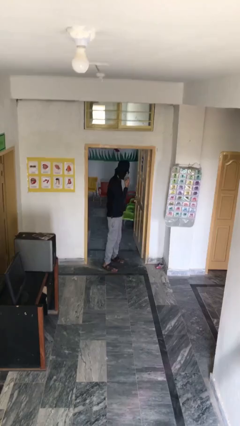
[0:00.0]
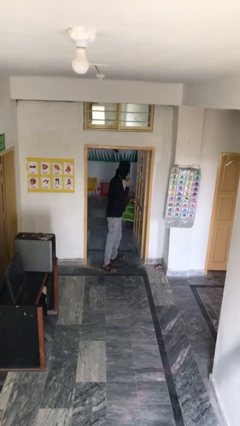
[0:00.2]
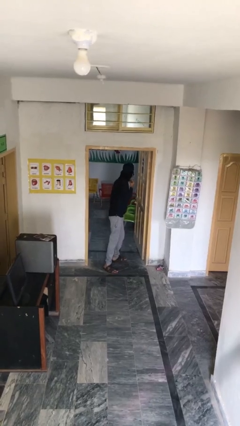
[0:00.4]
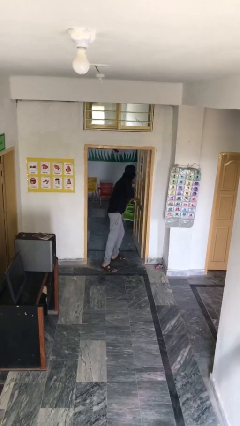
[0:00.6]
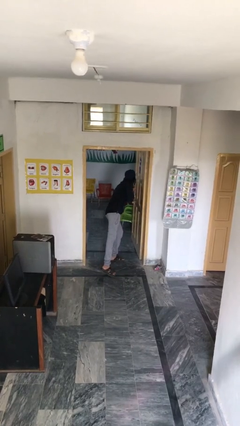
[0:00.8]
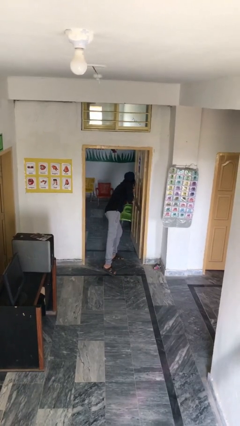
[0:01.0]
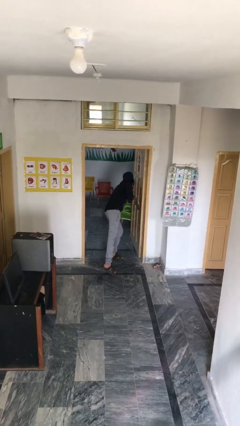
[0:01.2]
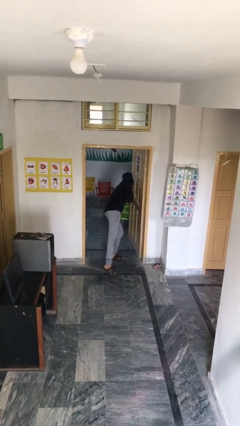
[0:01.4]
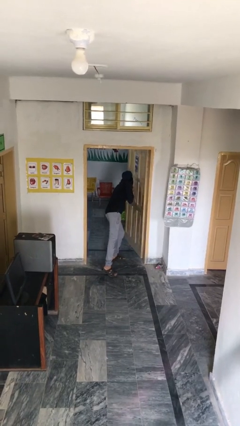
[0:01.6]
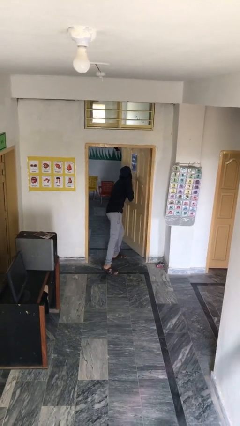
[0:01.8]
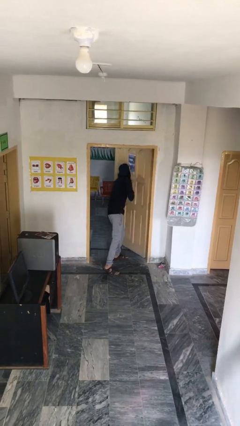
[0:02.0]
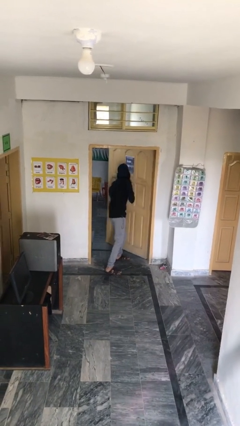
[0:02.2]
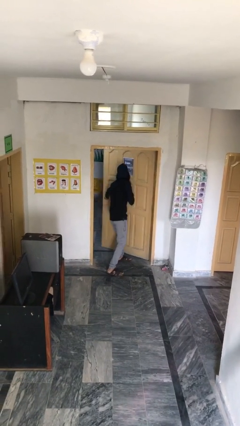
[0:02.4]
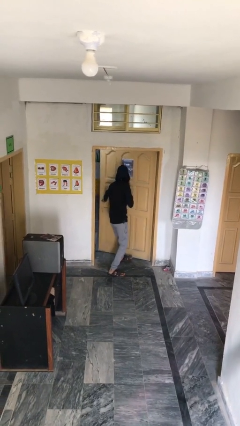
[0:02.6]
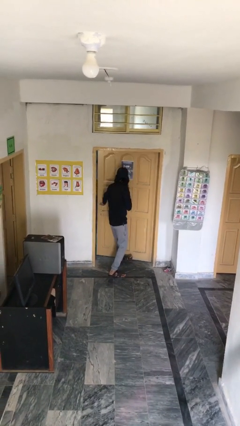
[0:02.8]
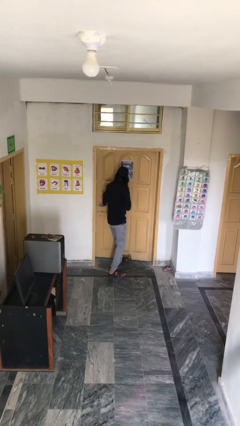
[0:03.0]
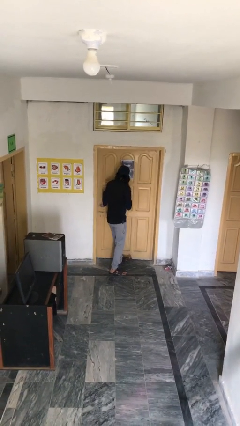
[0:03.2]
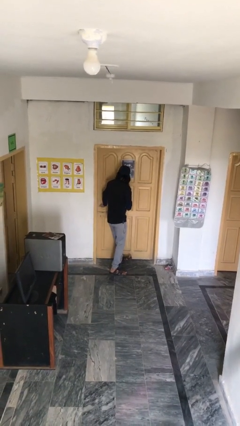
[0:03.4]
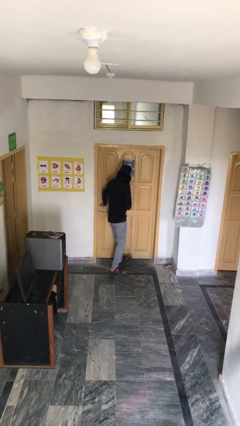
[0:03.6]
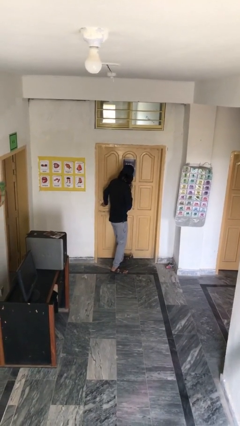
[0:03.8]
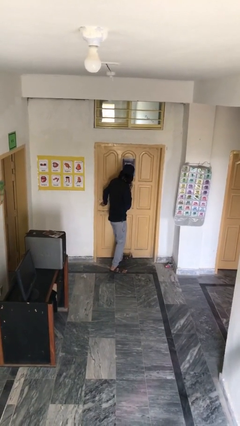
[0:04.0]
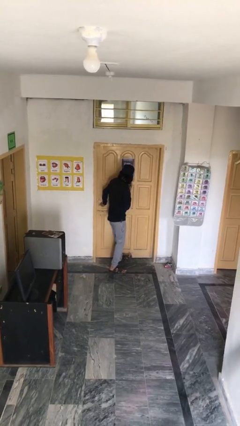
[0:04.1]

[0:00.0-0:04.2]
person closes facility door

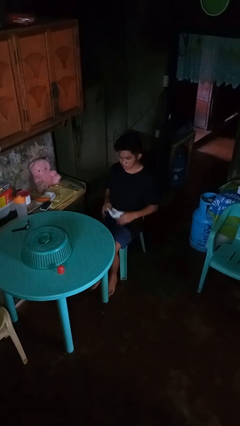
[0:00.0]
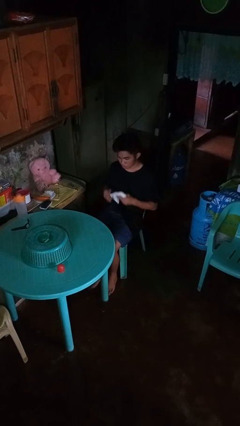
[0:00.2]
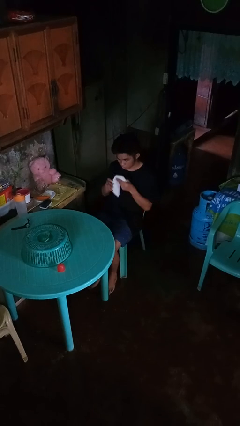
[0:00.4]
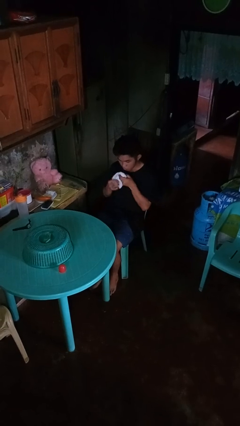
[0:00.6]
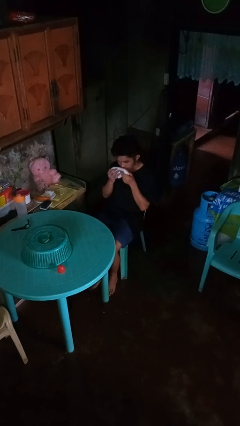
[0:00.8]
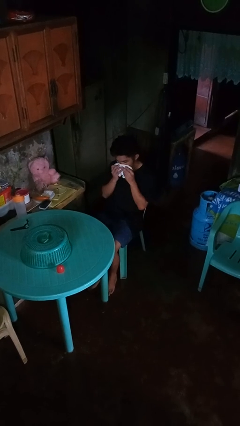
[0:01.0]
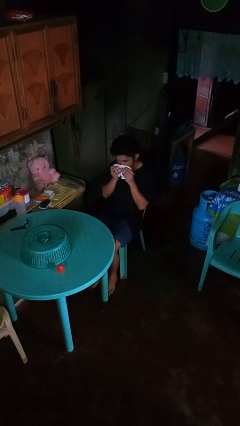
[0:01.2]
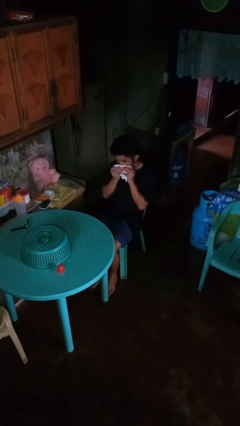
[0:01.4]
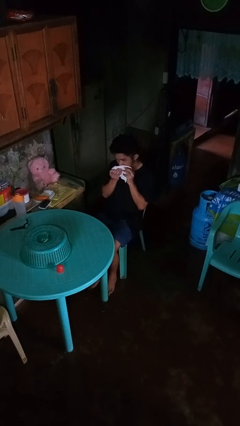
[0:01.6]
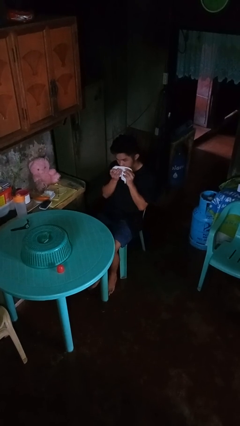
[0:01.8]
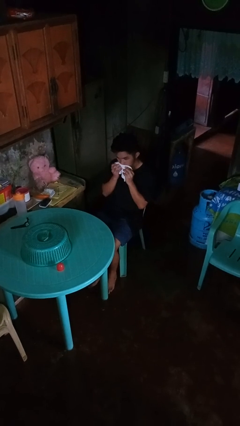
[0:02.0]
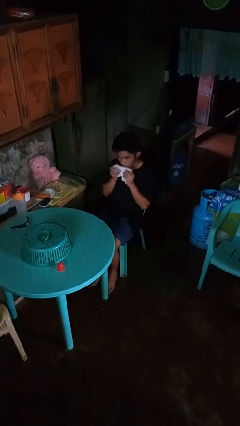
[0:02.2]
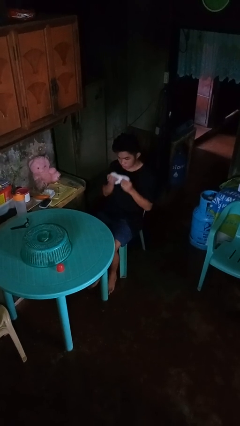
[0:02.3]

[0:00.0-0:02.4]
person wipes mouth with napkin

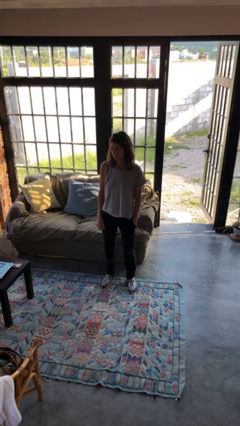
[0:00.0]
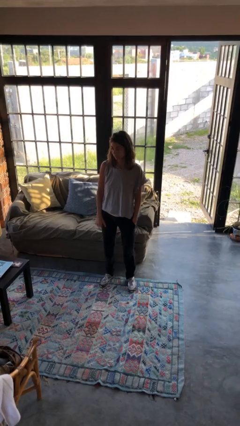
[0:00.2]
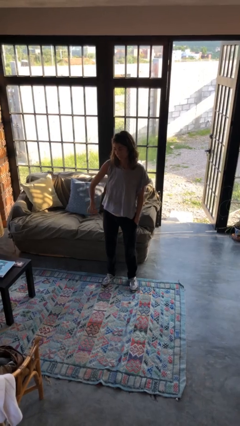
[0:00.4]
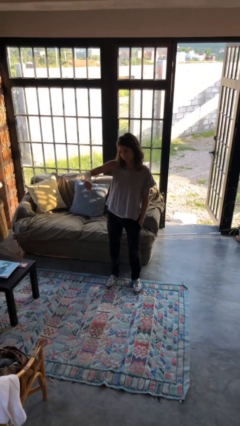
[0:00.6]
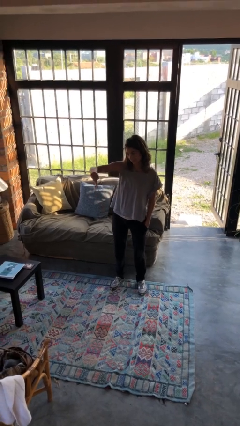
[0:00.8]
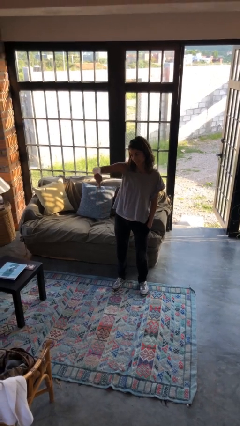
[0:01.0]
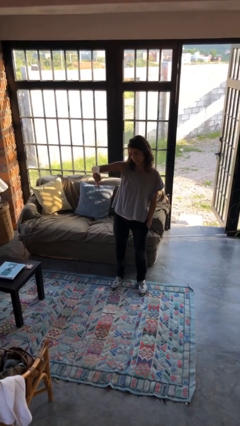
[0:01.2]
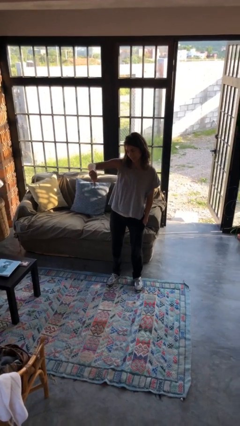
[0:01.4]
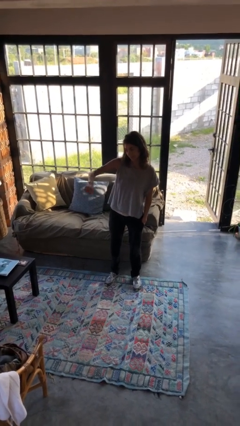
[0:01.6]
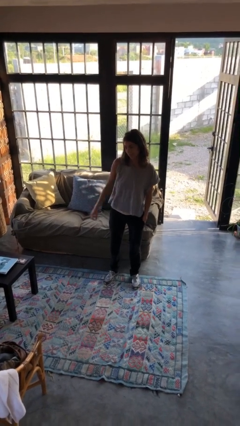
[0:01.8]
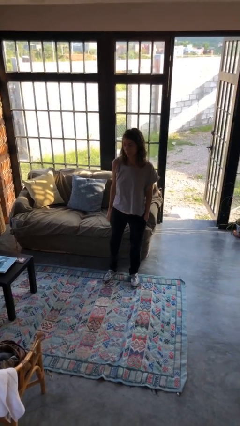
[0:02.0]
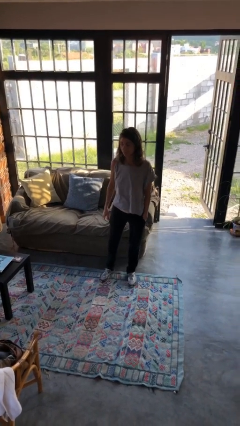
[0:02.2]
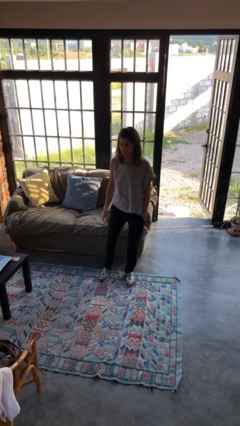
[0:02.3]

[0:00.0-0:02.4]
person gestures thumbs down

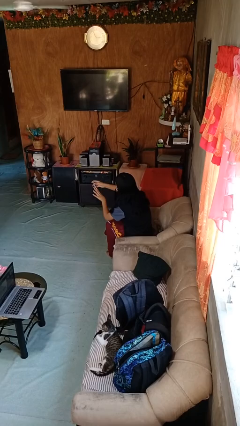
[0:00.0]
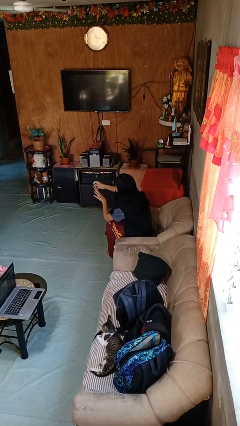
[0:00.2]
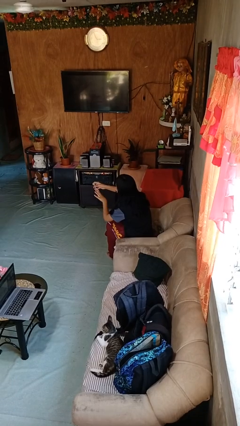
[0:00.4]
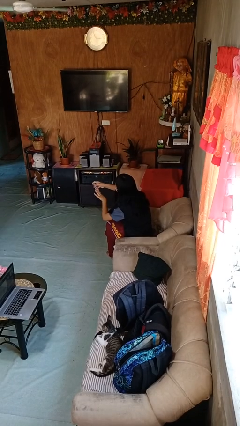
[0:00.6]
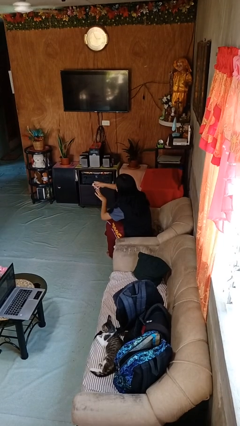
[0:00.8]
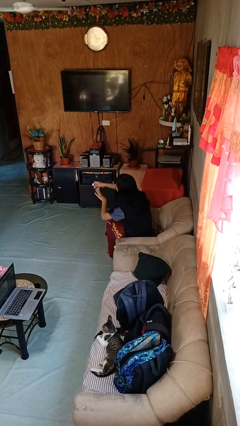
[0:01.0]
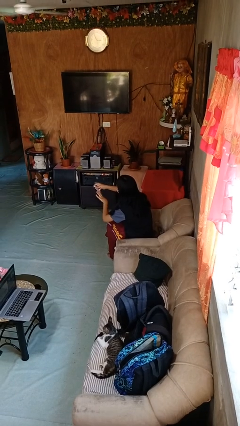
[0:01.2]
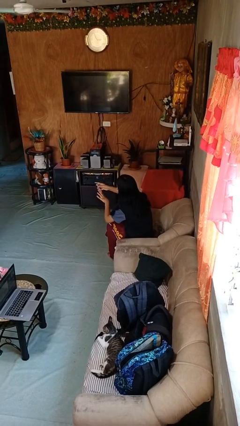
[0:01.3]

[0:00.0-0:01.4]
person clips fingernails

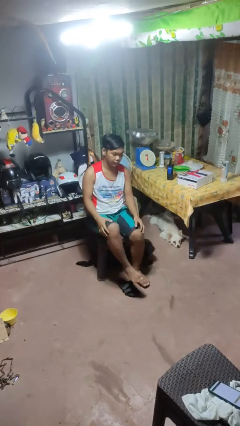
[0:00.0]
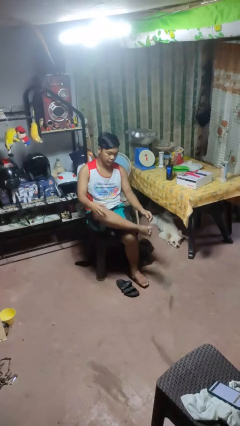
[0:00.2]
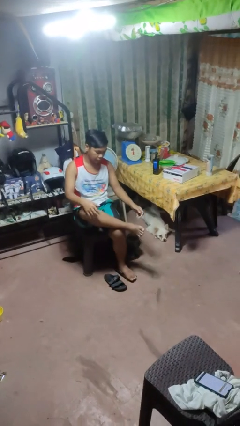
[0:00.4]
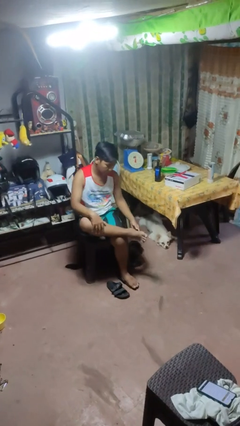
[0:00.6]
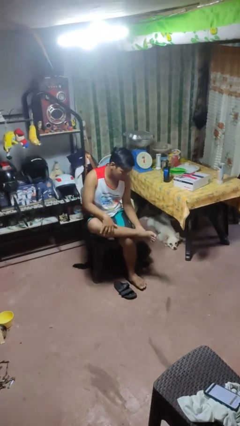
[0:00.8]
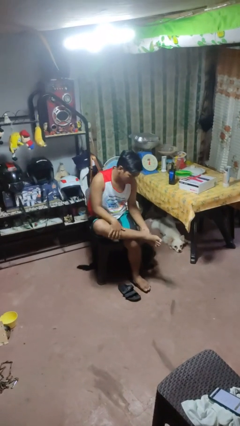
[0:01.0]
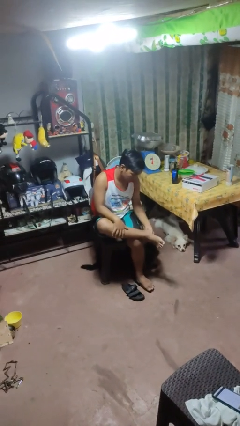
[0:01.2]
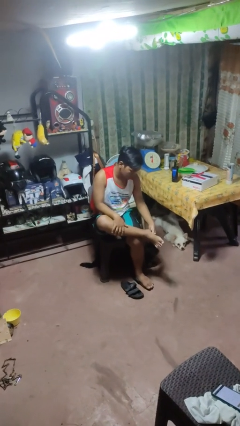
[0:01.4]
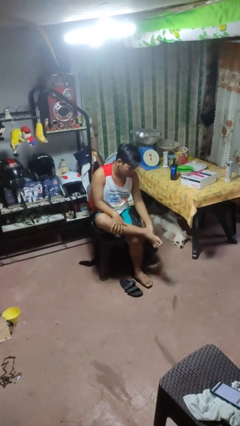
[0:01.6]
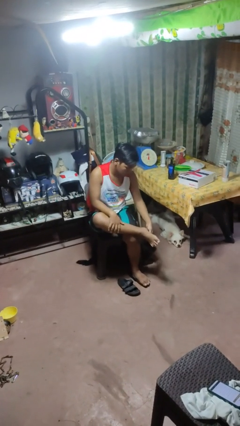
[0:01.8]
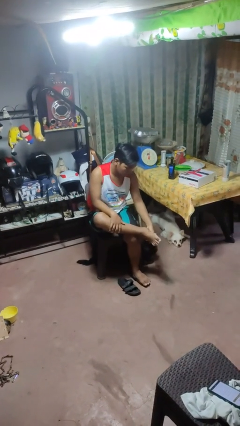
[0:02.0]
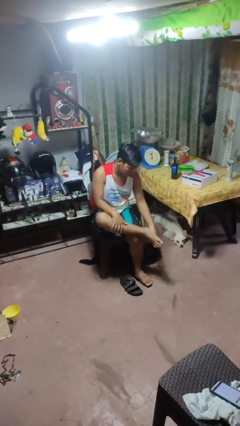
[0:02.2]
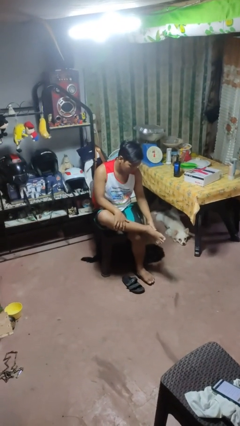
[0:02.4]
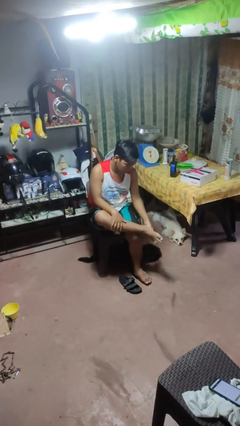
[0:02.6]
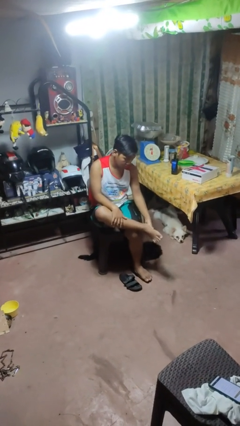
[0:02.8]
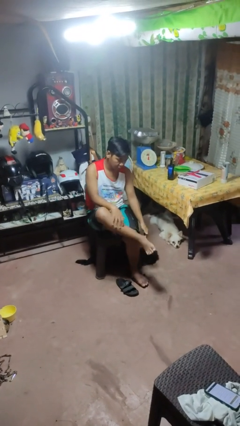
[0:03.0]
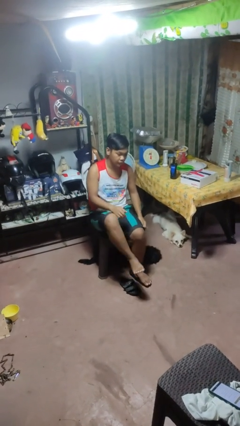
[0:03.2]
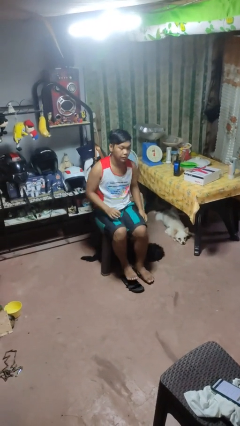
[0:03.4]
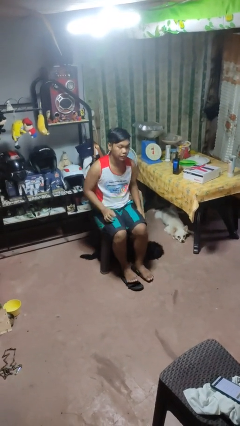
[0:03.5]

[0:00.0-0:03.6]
person rubs foot

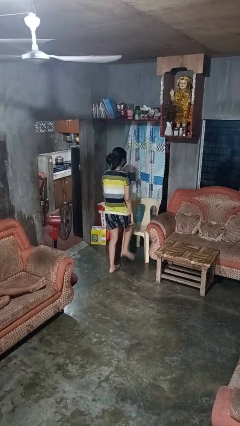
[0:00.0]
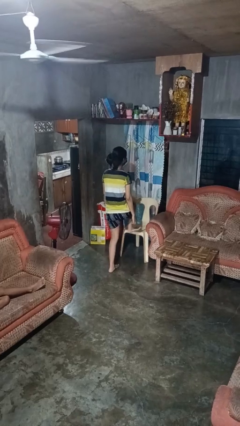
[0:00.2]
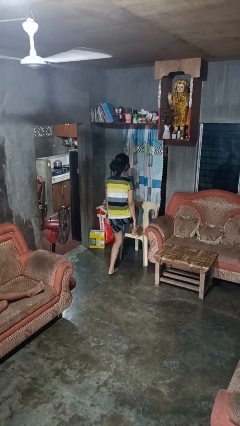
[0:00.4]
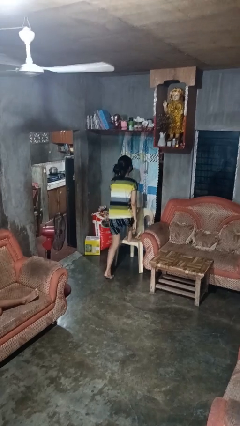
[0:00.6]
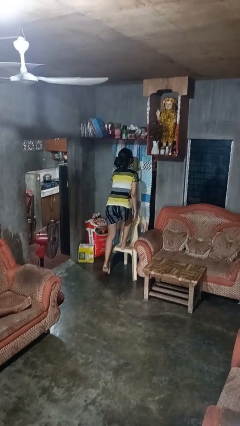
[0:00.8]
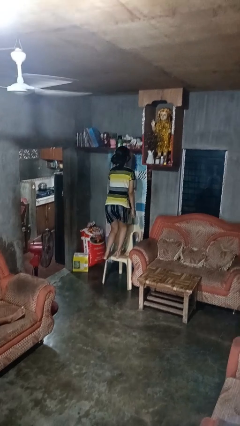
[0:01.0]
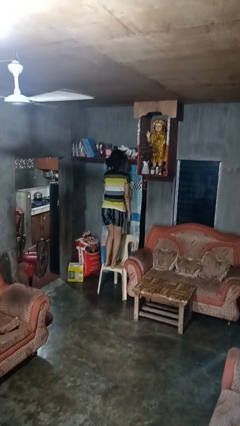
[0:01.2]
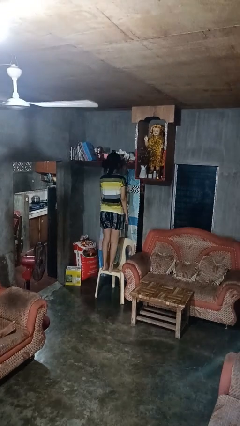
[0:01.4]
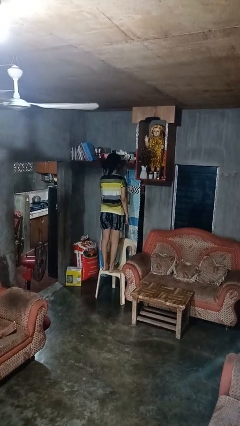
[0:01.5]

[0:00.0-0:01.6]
person climbs on chair

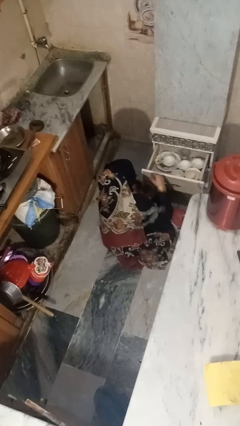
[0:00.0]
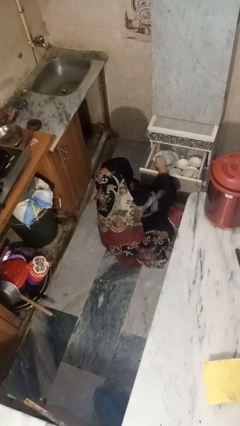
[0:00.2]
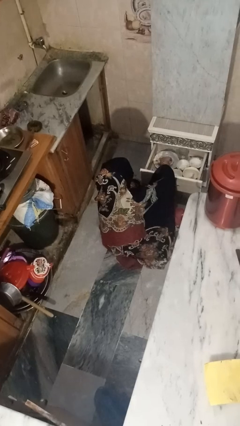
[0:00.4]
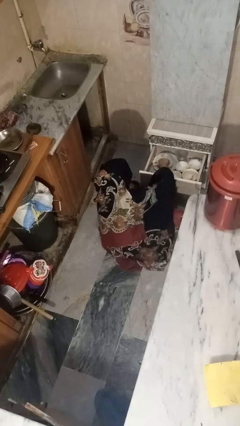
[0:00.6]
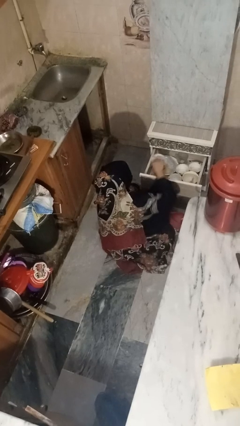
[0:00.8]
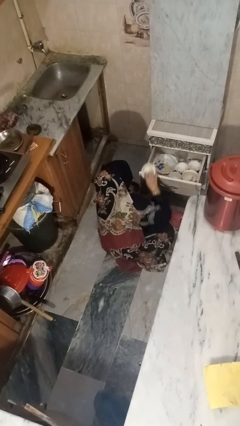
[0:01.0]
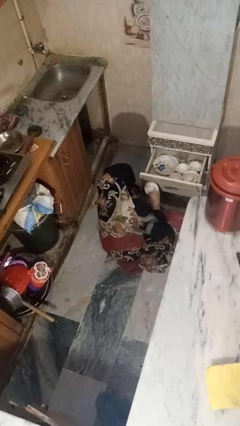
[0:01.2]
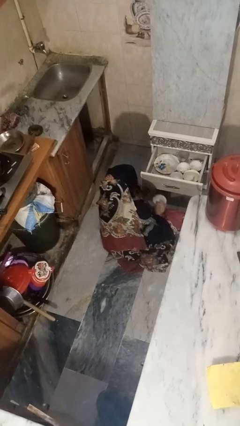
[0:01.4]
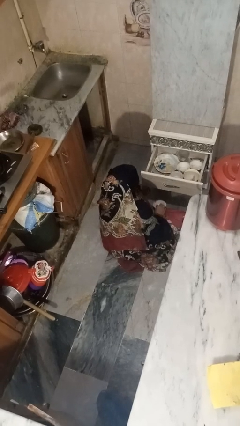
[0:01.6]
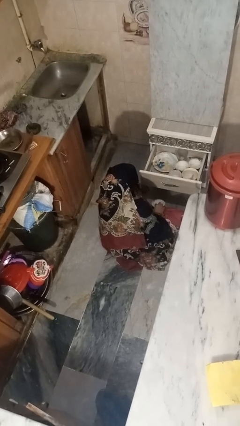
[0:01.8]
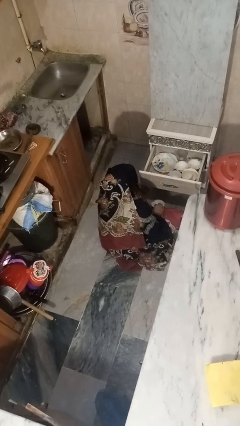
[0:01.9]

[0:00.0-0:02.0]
person takes object from kitchen drawer
